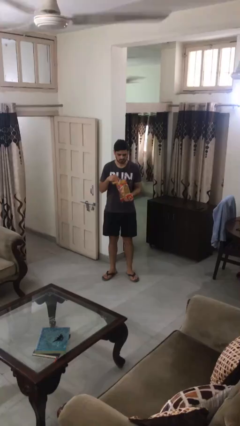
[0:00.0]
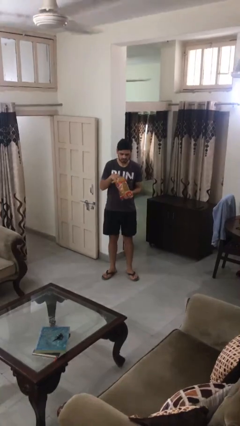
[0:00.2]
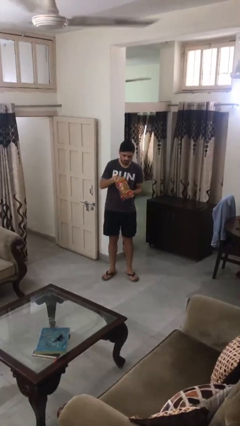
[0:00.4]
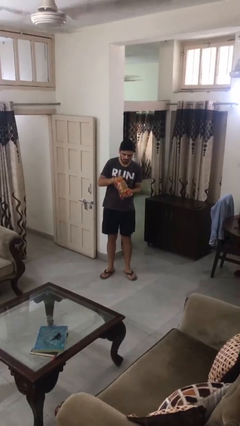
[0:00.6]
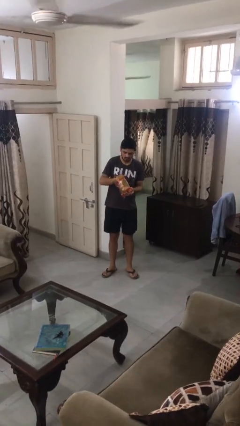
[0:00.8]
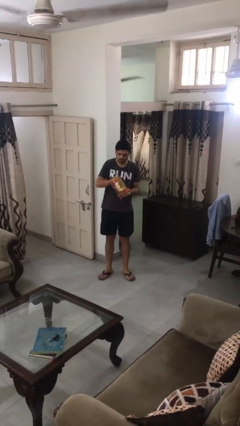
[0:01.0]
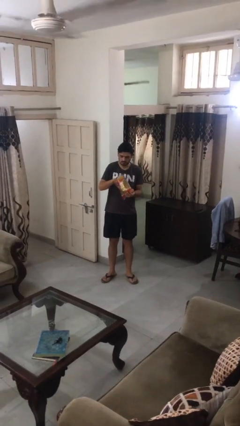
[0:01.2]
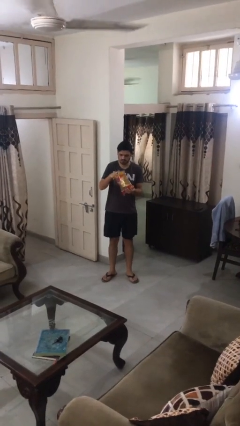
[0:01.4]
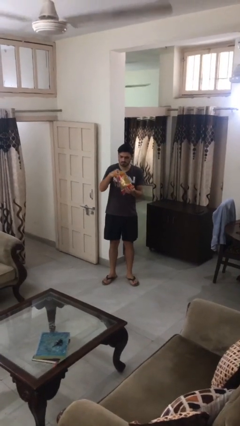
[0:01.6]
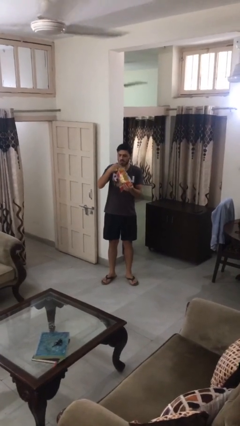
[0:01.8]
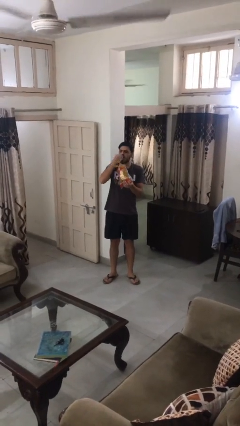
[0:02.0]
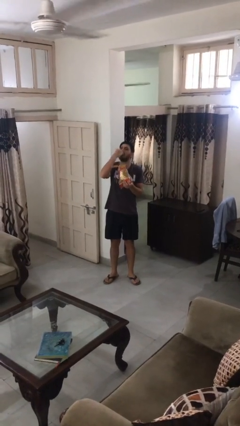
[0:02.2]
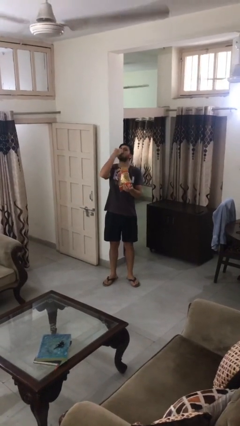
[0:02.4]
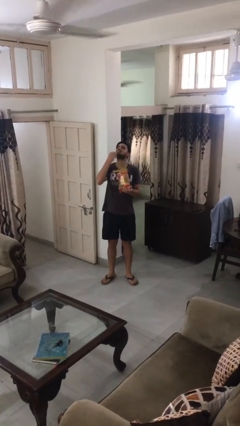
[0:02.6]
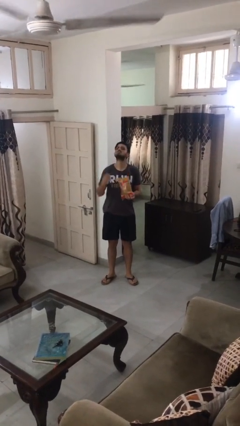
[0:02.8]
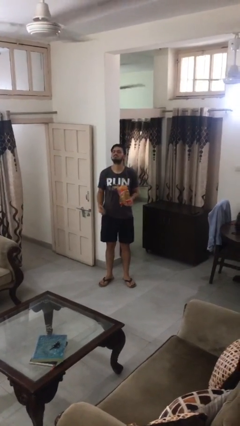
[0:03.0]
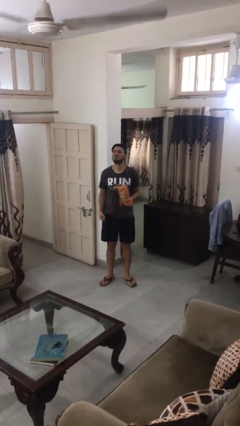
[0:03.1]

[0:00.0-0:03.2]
person eats snack from bag

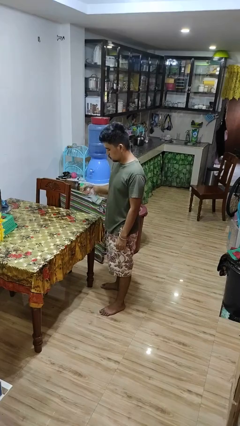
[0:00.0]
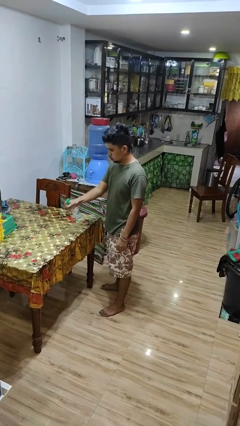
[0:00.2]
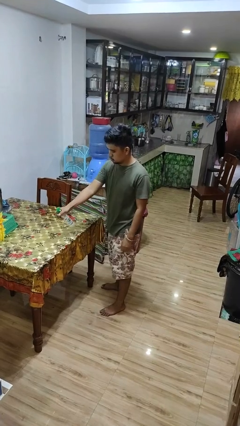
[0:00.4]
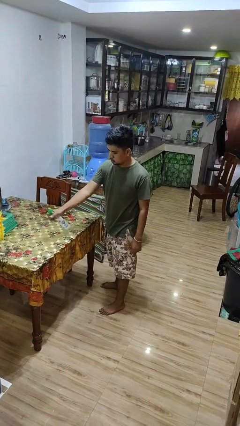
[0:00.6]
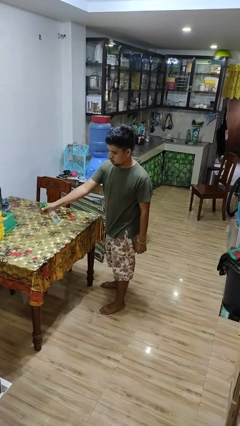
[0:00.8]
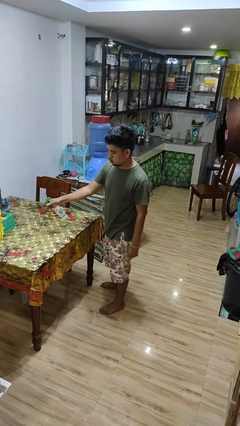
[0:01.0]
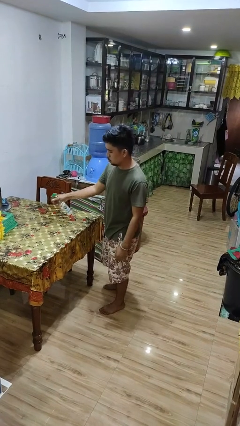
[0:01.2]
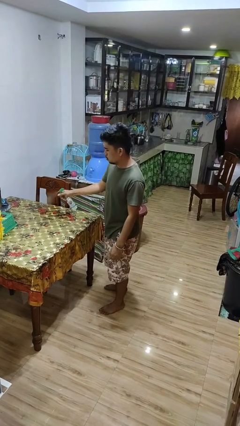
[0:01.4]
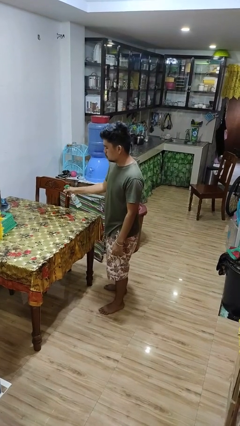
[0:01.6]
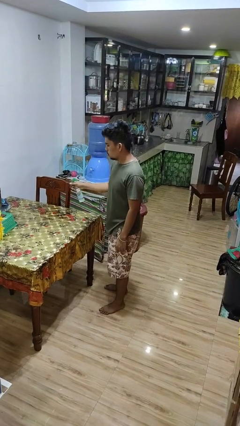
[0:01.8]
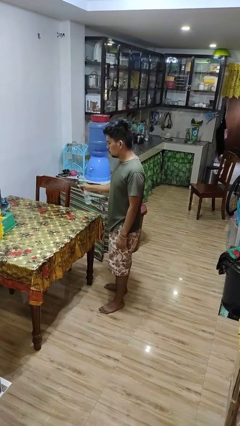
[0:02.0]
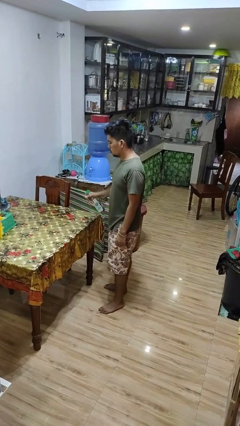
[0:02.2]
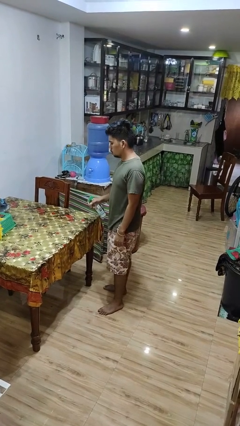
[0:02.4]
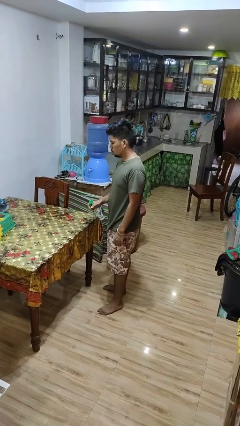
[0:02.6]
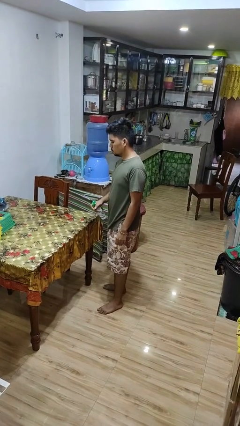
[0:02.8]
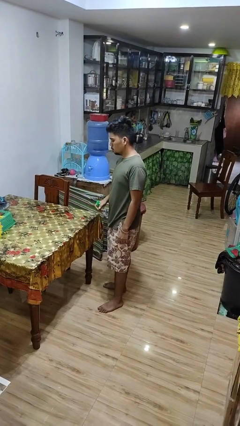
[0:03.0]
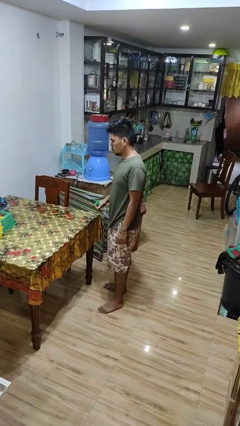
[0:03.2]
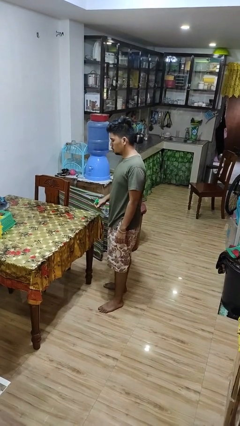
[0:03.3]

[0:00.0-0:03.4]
person sprays from bottle

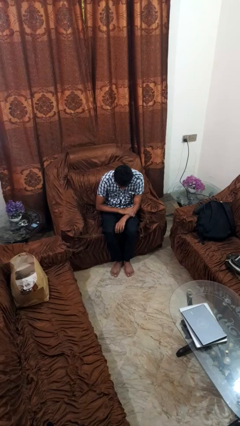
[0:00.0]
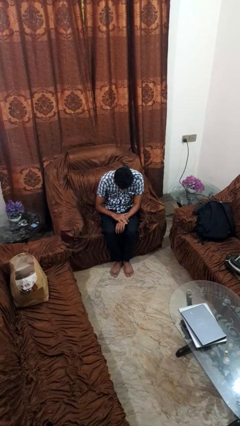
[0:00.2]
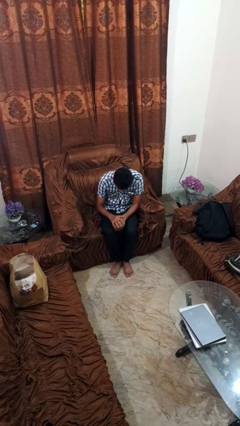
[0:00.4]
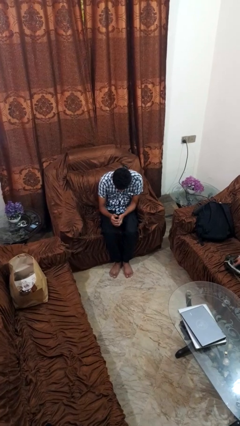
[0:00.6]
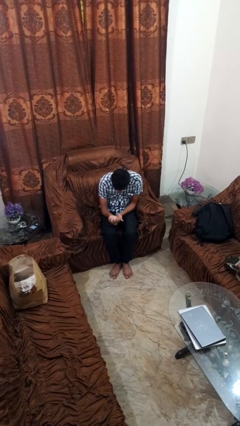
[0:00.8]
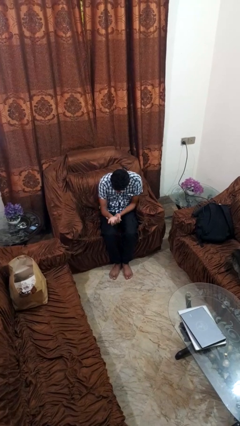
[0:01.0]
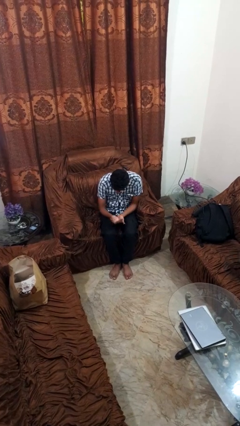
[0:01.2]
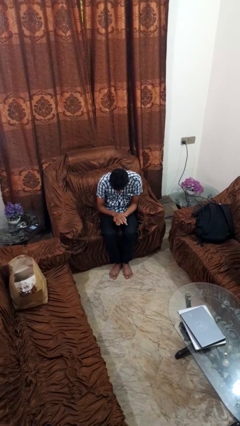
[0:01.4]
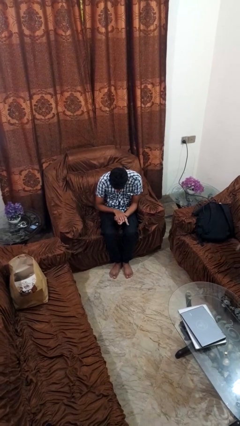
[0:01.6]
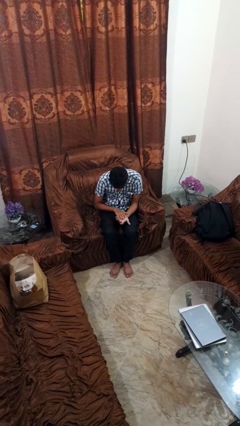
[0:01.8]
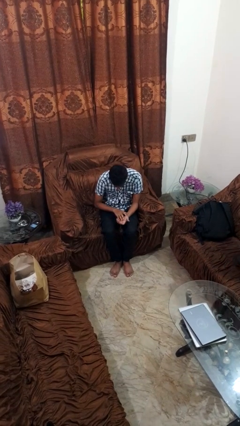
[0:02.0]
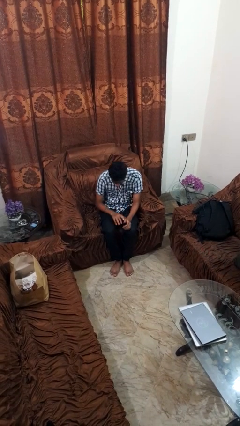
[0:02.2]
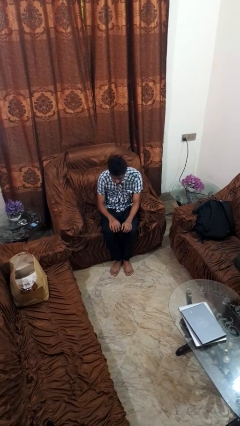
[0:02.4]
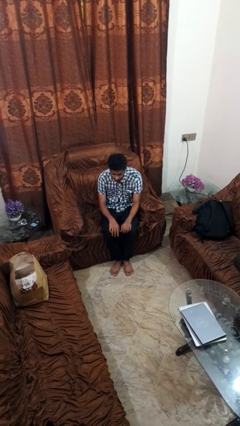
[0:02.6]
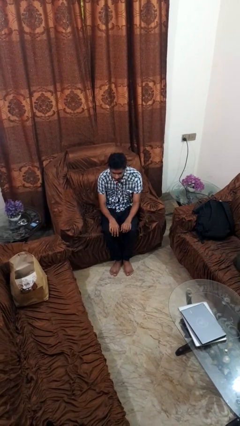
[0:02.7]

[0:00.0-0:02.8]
person looks at hands in lap

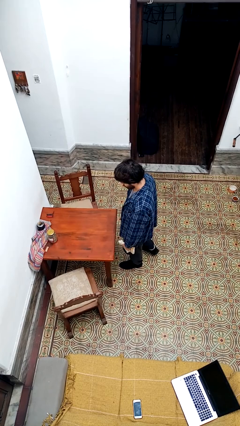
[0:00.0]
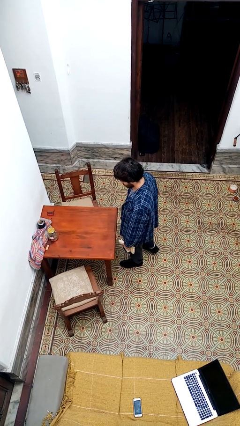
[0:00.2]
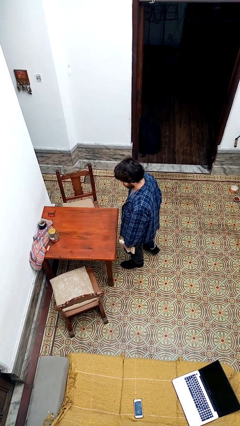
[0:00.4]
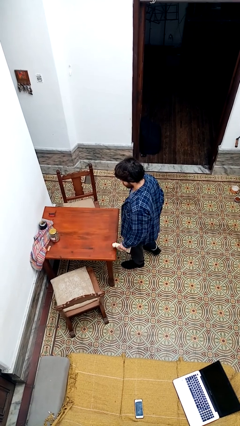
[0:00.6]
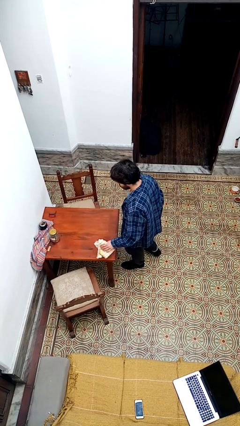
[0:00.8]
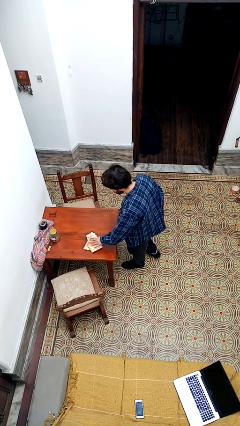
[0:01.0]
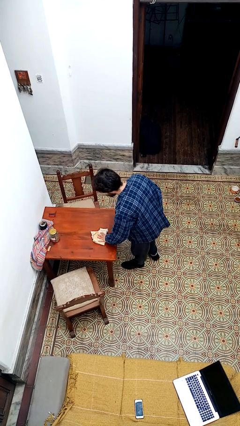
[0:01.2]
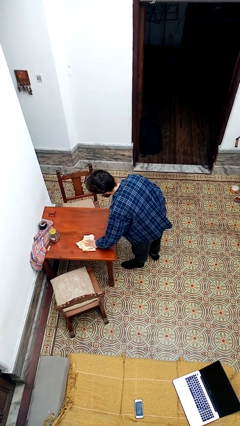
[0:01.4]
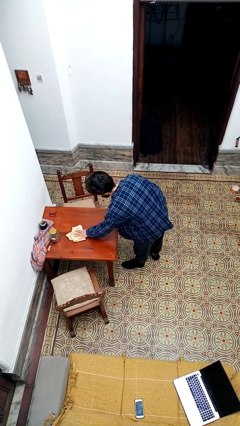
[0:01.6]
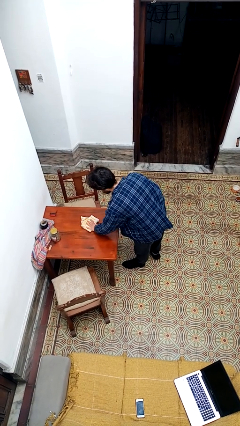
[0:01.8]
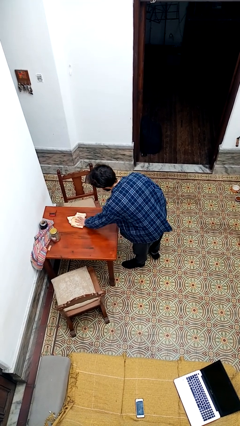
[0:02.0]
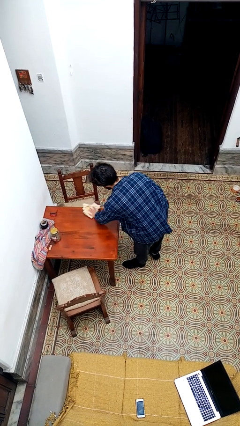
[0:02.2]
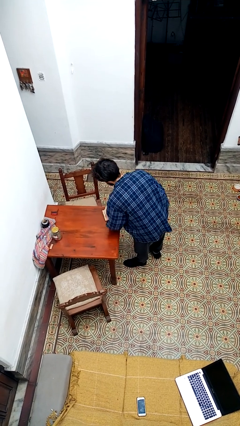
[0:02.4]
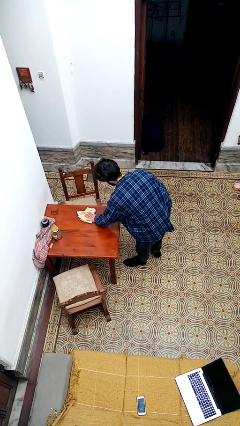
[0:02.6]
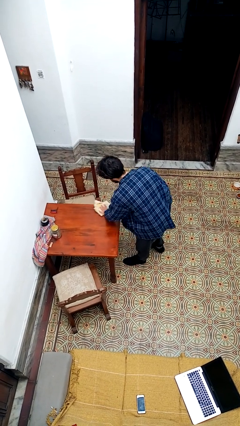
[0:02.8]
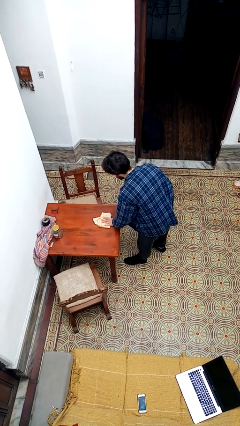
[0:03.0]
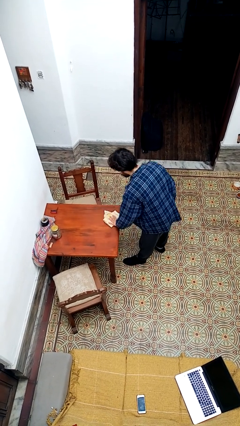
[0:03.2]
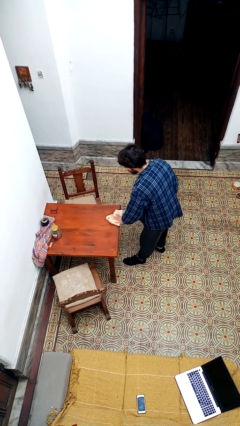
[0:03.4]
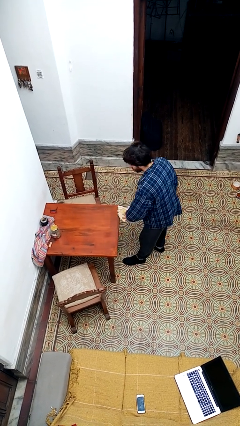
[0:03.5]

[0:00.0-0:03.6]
person cleans table with rag

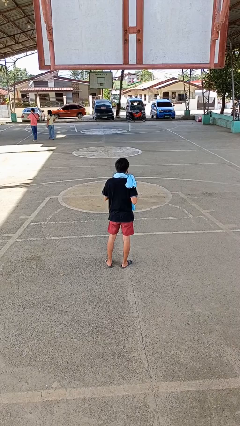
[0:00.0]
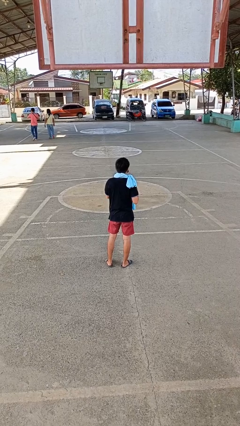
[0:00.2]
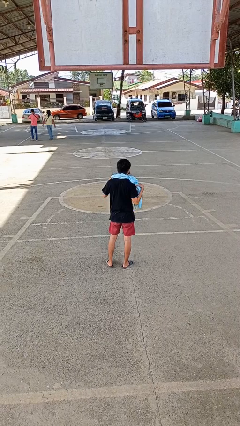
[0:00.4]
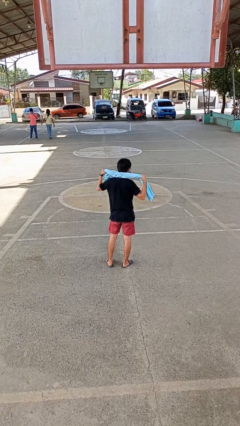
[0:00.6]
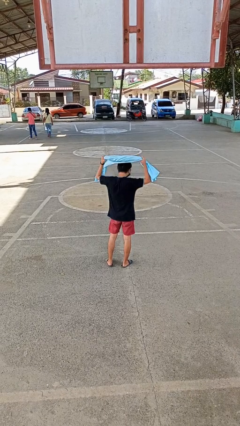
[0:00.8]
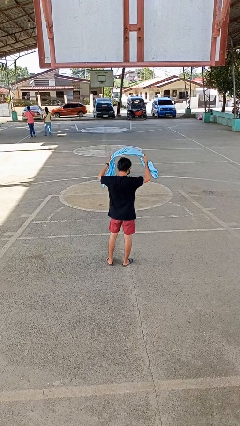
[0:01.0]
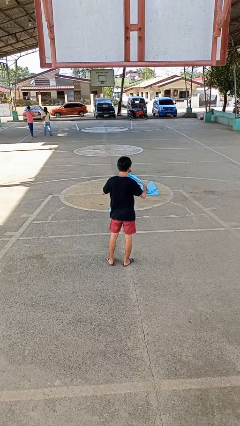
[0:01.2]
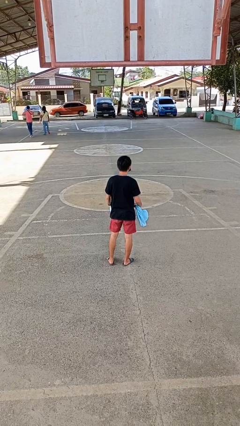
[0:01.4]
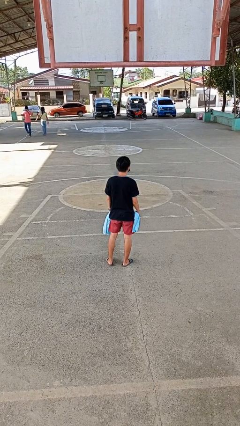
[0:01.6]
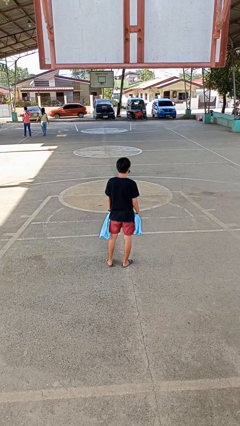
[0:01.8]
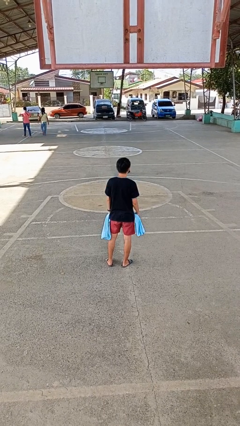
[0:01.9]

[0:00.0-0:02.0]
person takes off scarf

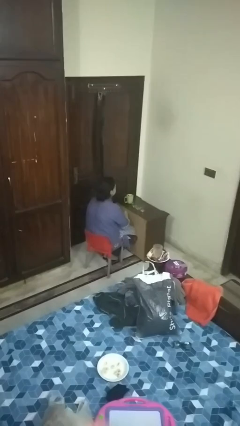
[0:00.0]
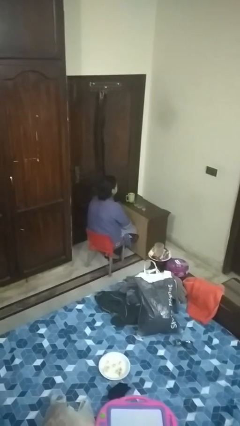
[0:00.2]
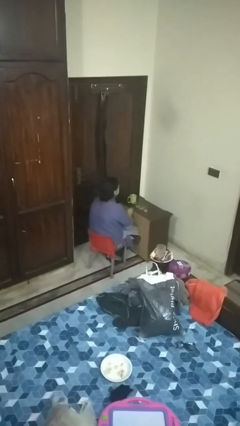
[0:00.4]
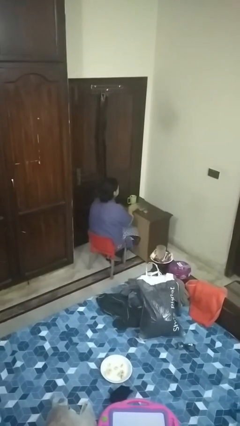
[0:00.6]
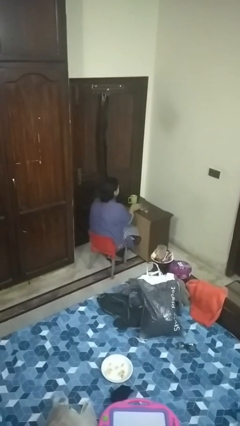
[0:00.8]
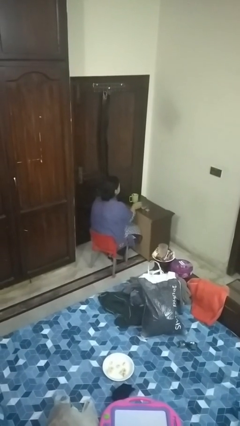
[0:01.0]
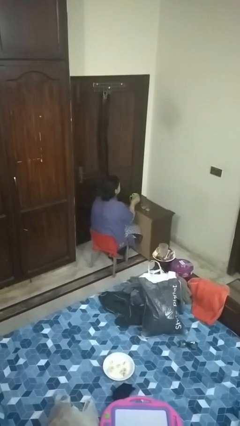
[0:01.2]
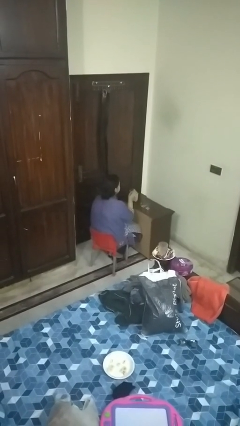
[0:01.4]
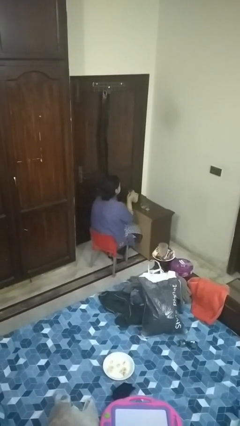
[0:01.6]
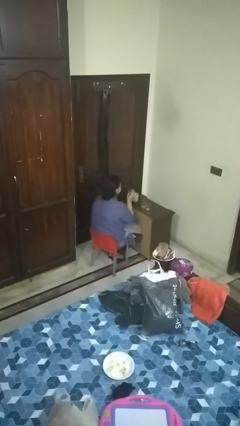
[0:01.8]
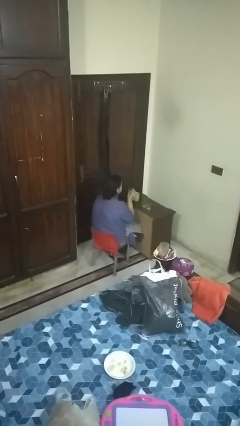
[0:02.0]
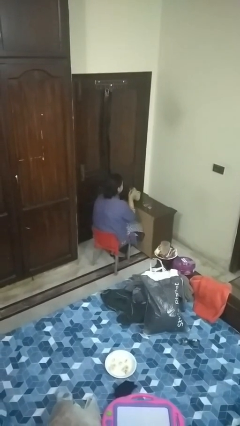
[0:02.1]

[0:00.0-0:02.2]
person picks up object from table

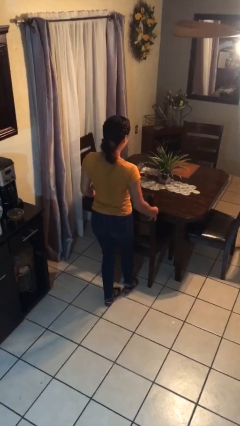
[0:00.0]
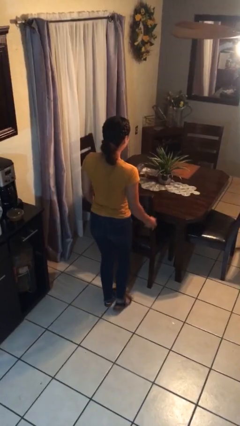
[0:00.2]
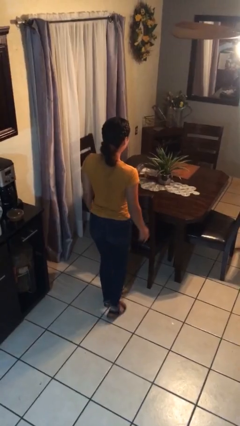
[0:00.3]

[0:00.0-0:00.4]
person pushes in chair
